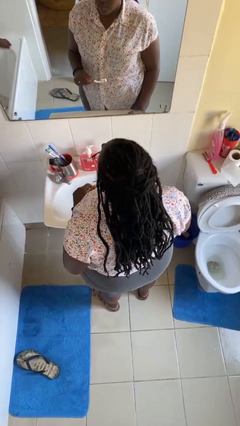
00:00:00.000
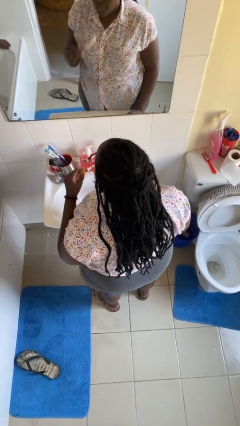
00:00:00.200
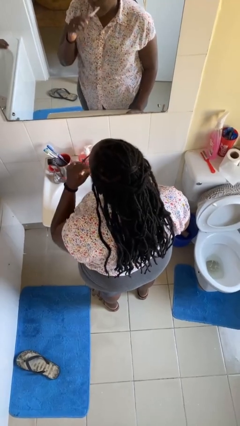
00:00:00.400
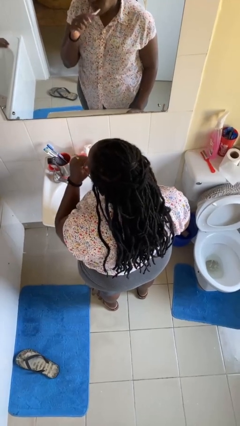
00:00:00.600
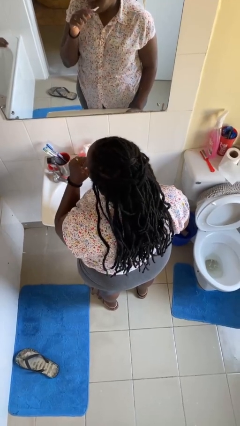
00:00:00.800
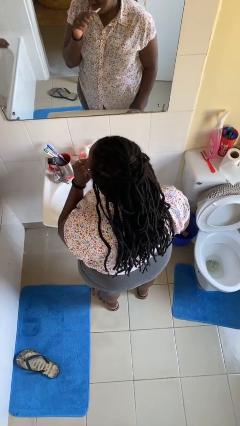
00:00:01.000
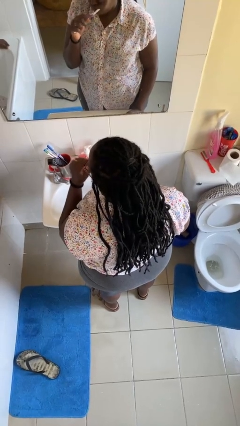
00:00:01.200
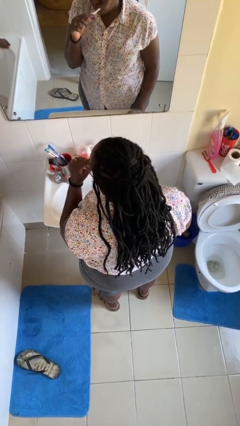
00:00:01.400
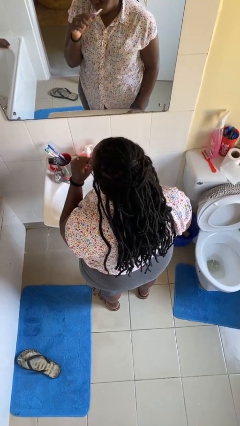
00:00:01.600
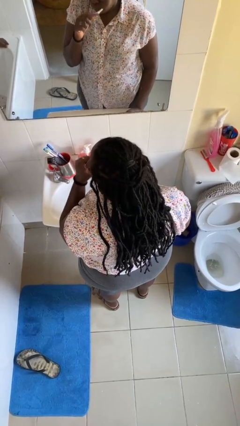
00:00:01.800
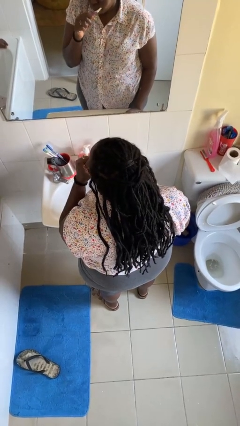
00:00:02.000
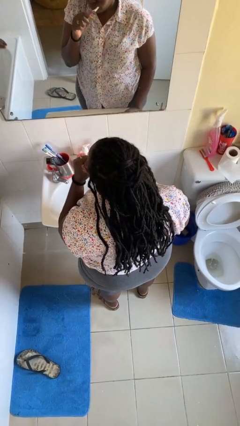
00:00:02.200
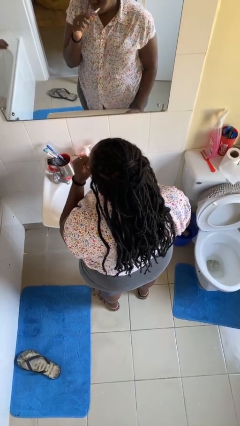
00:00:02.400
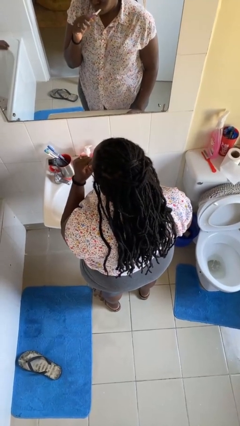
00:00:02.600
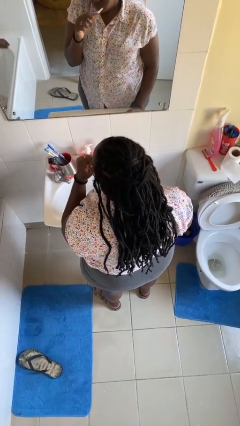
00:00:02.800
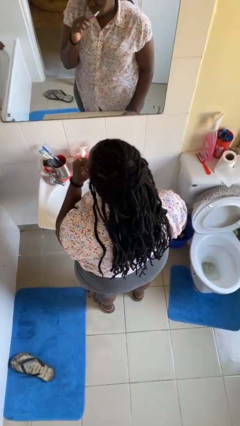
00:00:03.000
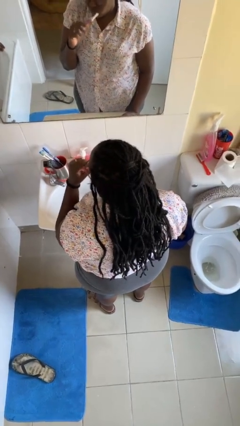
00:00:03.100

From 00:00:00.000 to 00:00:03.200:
person brushes teeth

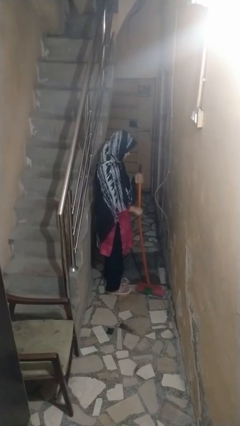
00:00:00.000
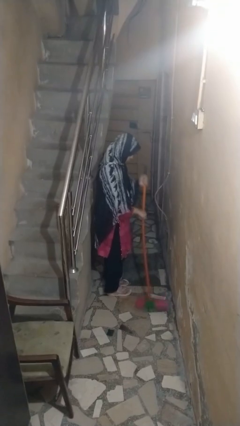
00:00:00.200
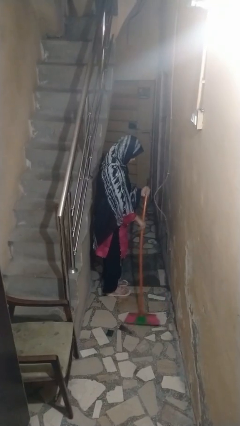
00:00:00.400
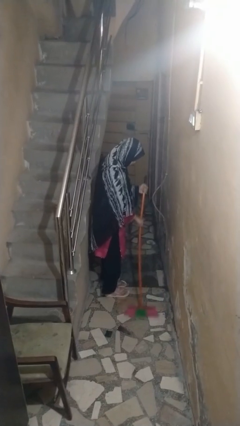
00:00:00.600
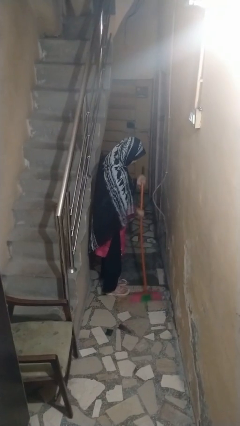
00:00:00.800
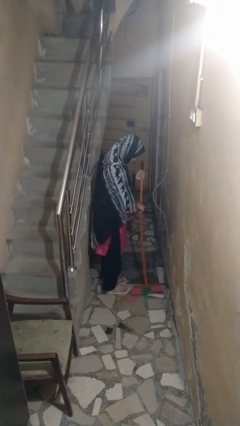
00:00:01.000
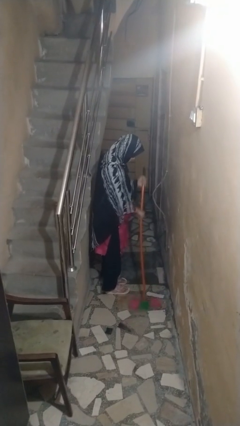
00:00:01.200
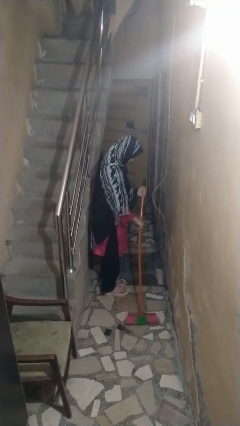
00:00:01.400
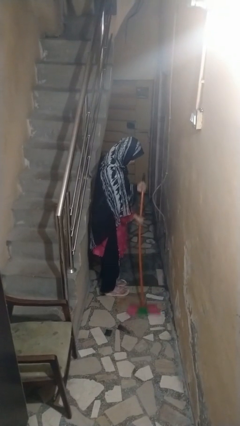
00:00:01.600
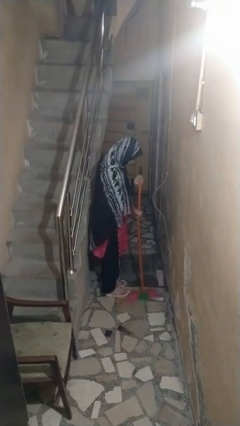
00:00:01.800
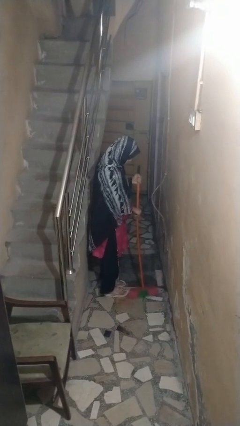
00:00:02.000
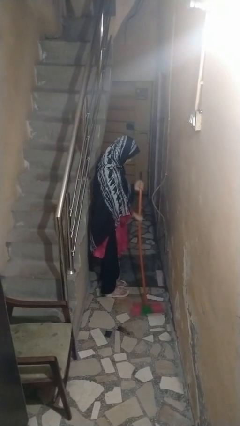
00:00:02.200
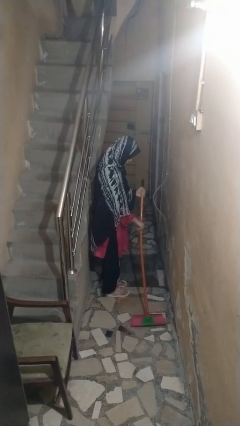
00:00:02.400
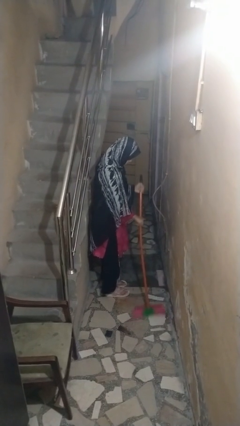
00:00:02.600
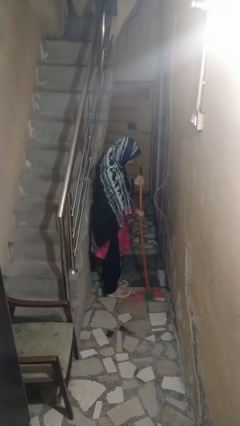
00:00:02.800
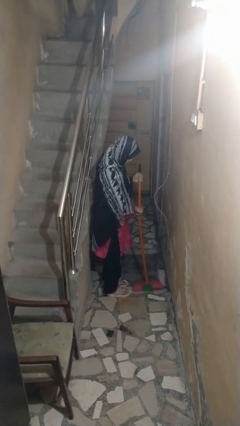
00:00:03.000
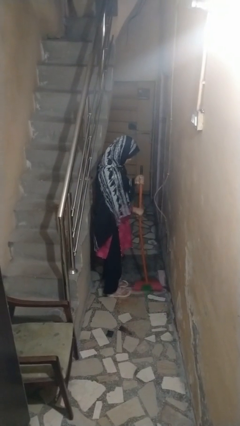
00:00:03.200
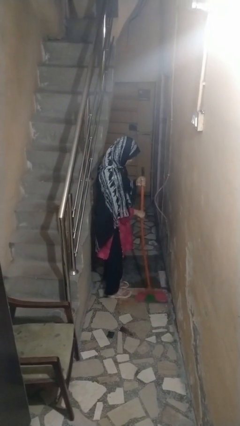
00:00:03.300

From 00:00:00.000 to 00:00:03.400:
person sweeps floor

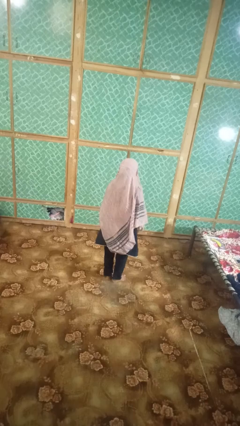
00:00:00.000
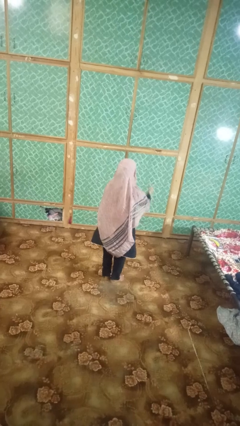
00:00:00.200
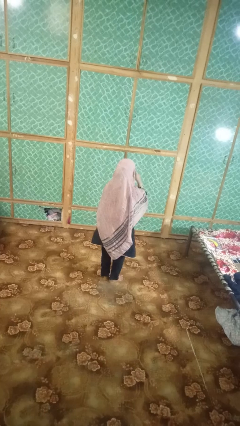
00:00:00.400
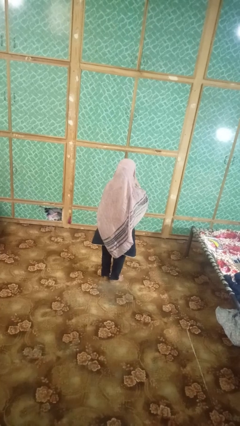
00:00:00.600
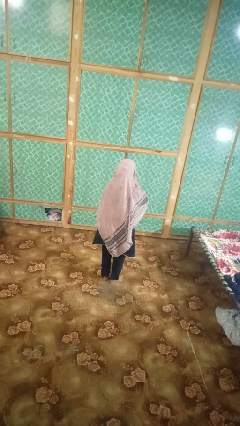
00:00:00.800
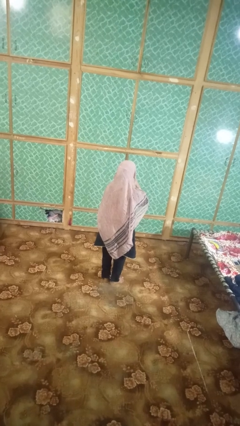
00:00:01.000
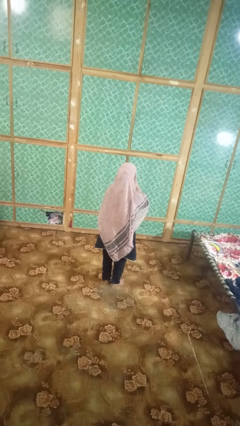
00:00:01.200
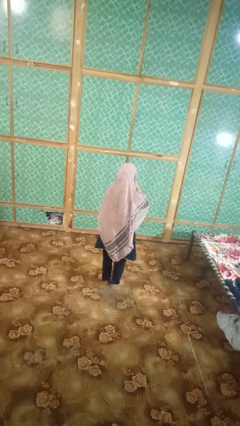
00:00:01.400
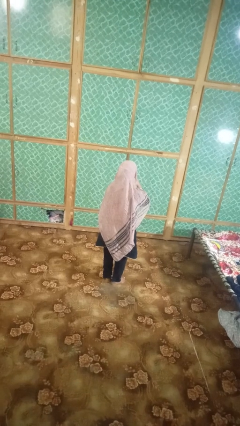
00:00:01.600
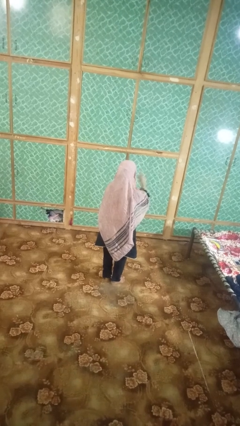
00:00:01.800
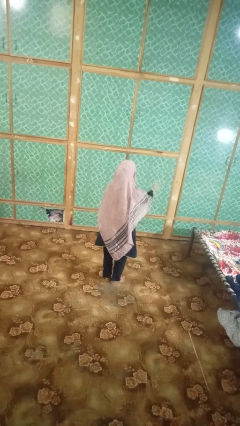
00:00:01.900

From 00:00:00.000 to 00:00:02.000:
person gestures be quiet

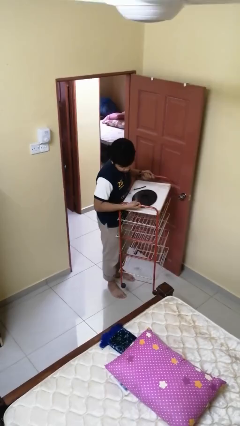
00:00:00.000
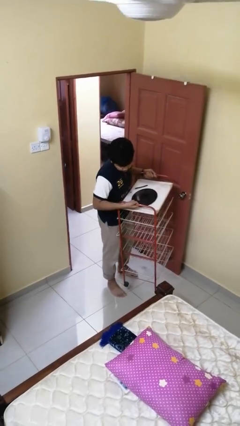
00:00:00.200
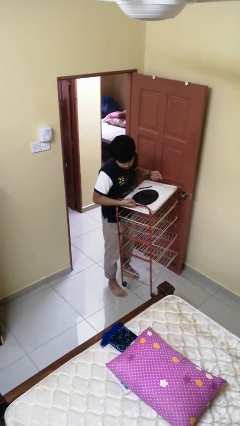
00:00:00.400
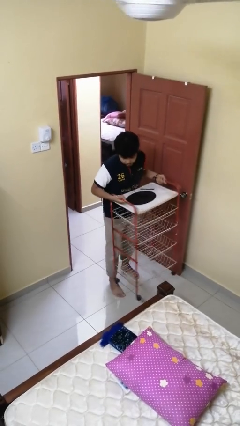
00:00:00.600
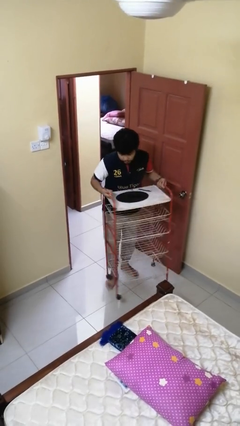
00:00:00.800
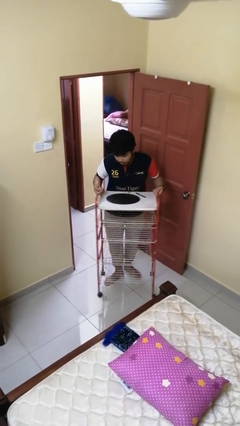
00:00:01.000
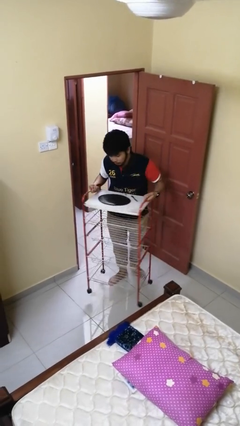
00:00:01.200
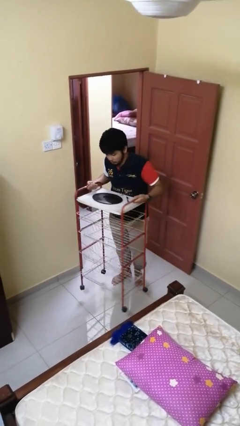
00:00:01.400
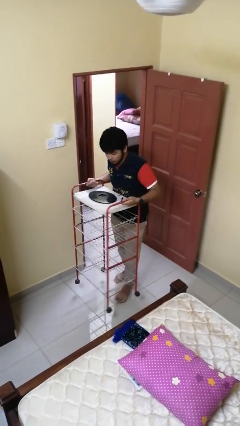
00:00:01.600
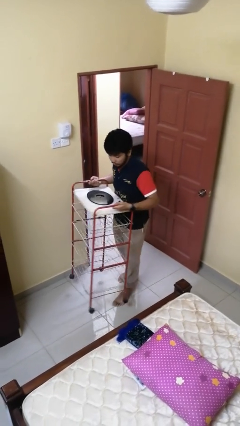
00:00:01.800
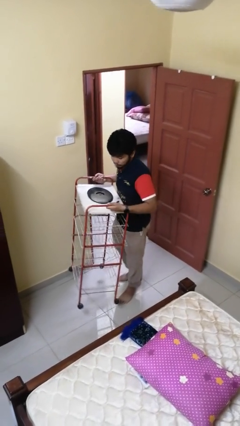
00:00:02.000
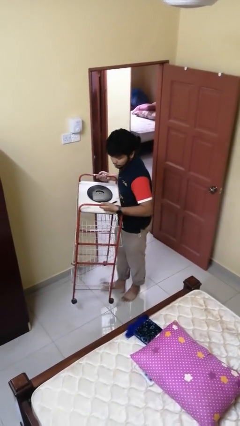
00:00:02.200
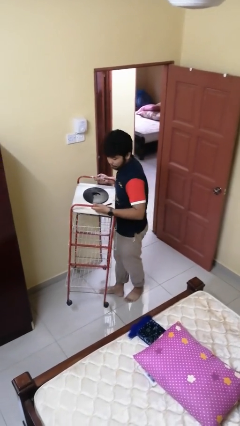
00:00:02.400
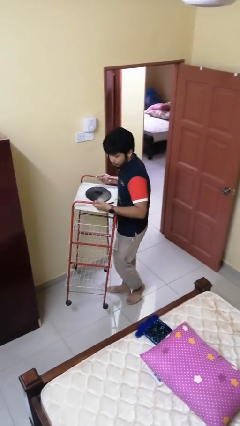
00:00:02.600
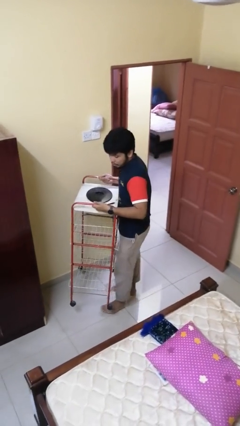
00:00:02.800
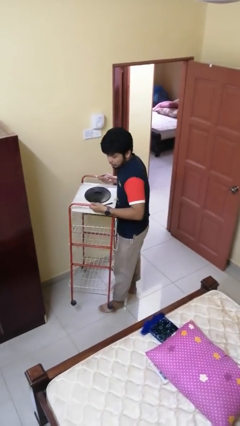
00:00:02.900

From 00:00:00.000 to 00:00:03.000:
person carries furniture

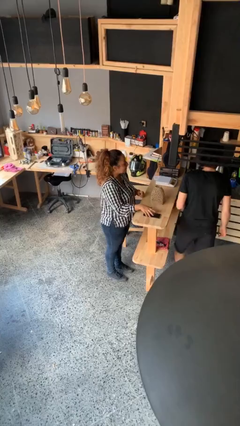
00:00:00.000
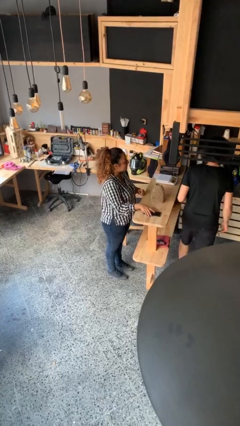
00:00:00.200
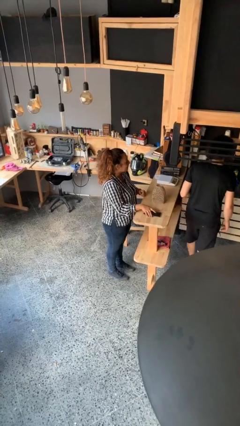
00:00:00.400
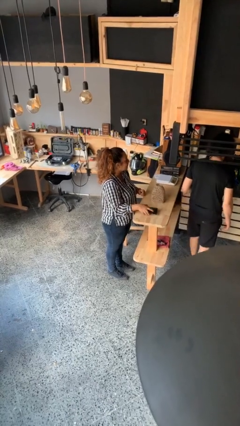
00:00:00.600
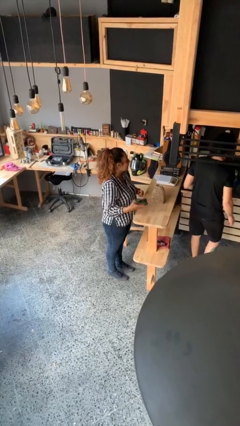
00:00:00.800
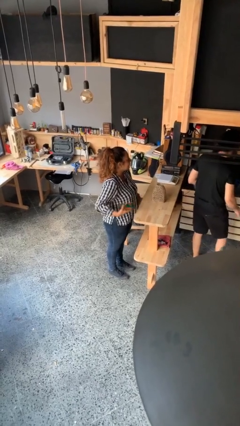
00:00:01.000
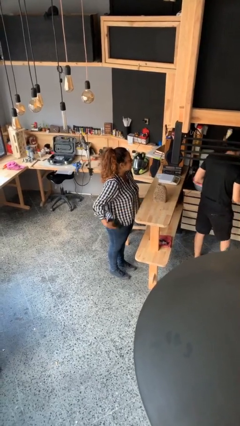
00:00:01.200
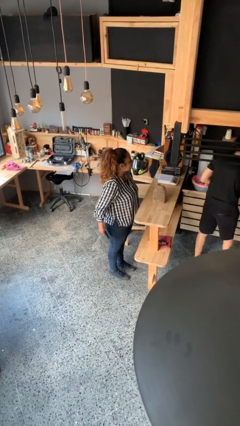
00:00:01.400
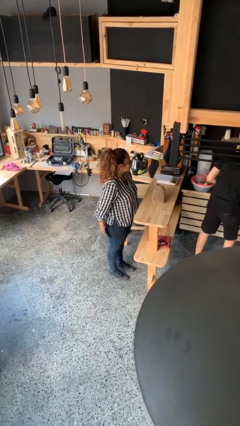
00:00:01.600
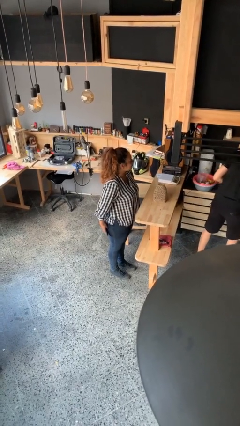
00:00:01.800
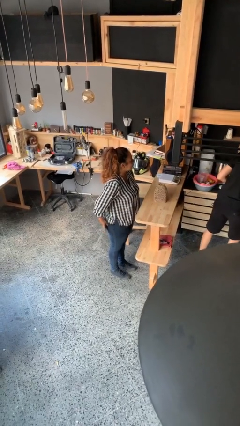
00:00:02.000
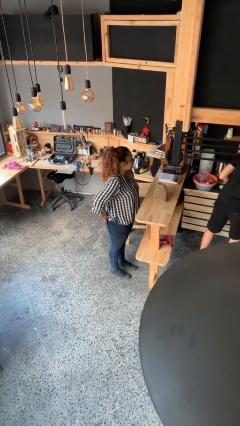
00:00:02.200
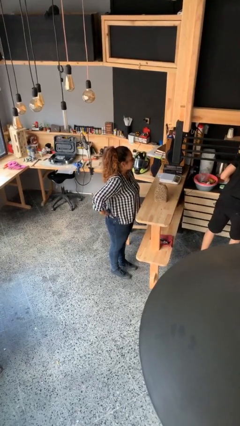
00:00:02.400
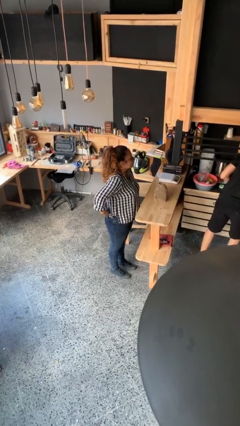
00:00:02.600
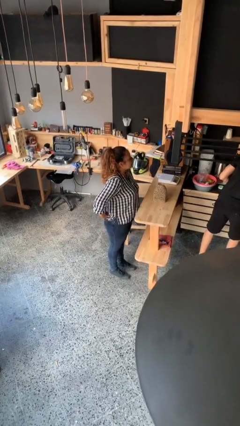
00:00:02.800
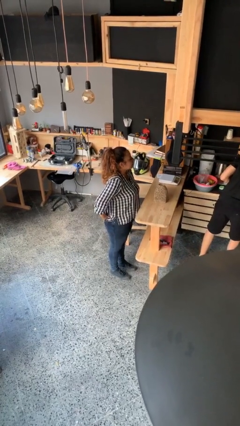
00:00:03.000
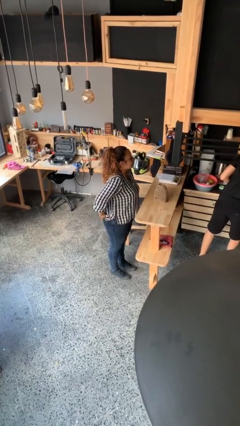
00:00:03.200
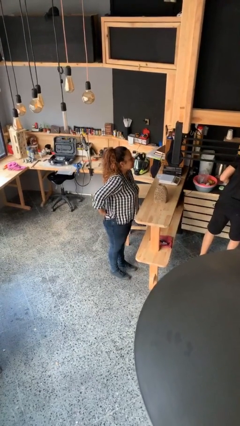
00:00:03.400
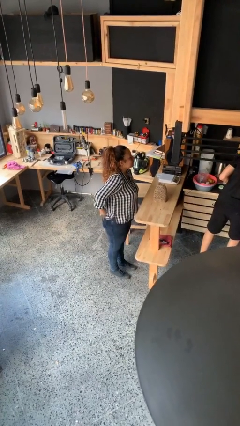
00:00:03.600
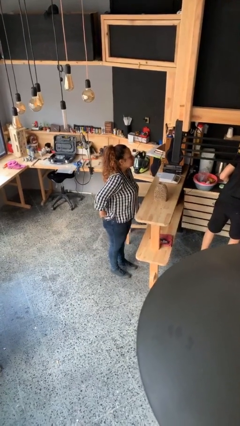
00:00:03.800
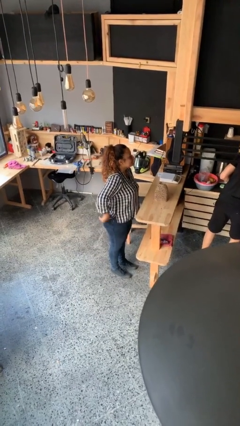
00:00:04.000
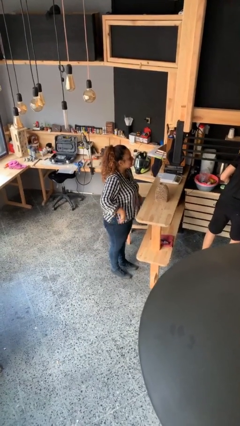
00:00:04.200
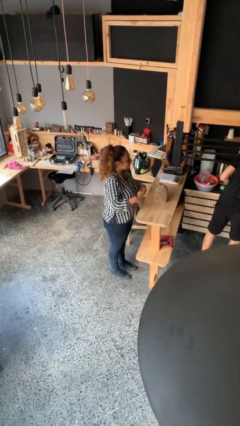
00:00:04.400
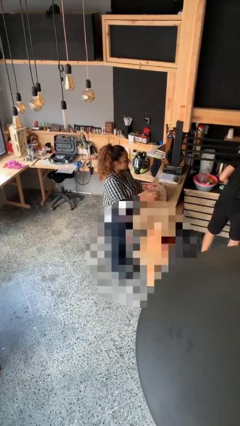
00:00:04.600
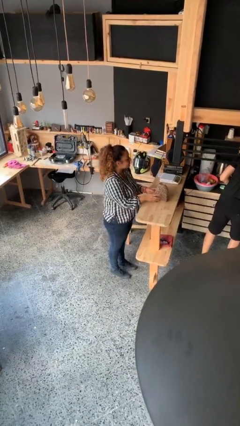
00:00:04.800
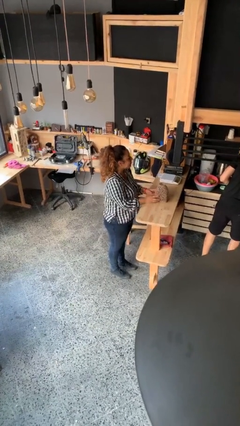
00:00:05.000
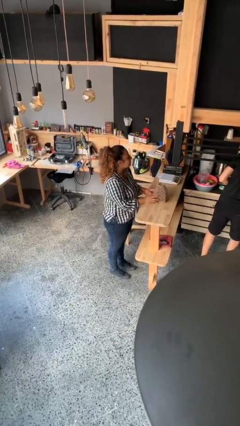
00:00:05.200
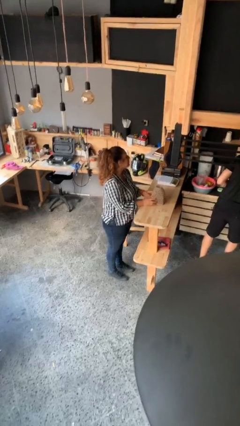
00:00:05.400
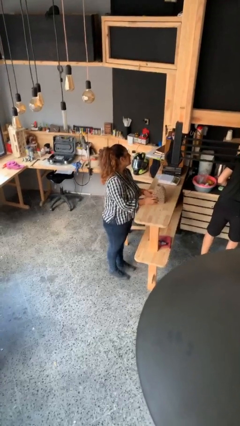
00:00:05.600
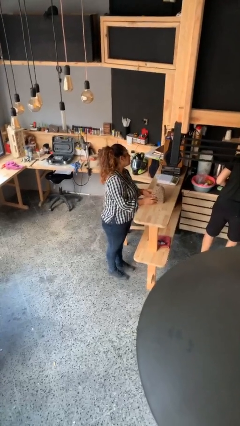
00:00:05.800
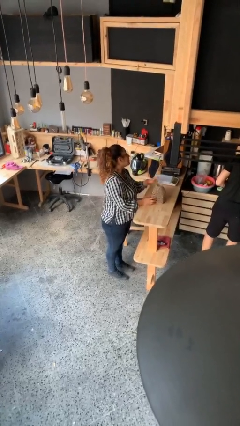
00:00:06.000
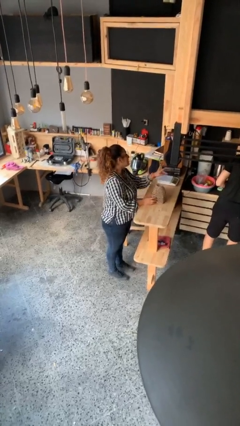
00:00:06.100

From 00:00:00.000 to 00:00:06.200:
person steals object from person
